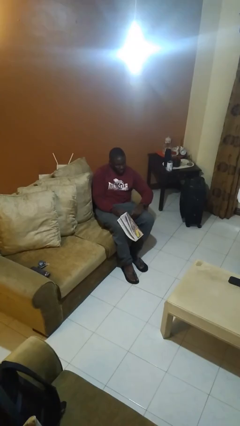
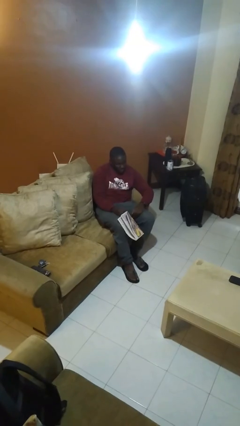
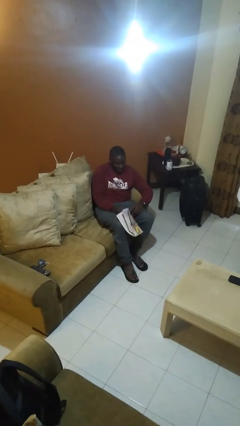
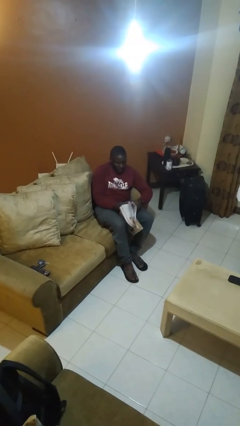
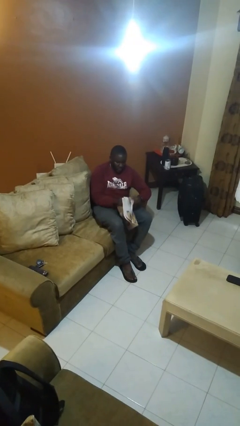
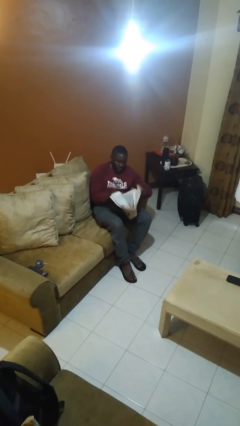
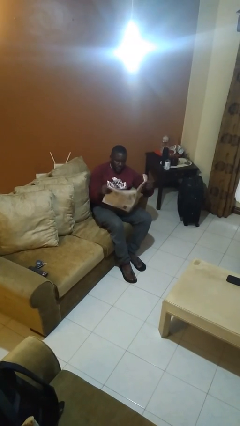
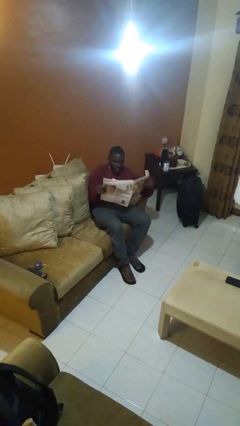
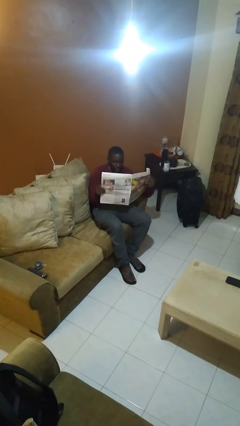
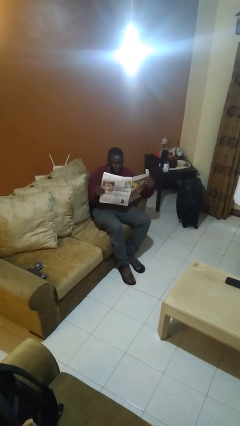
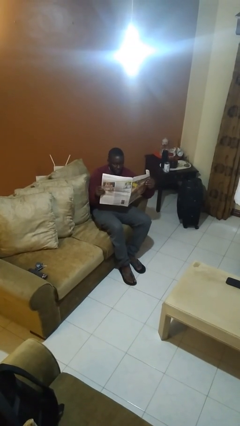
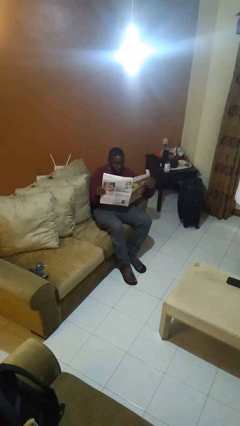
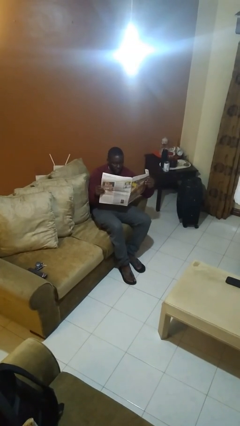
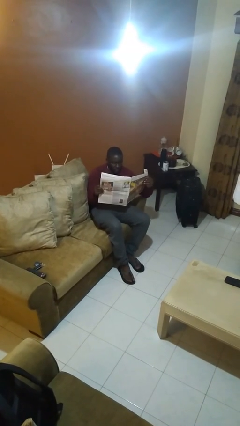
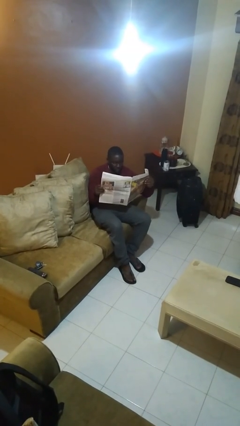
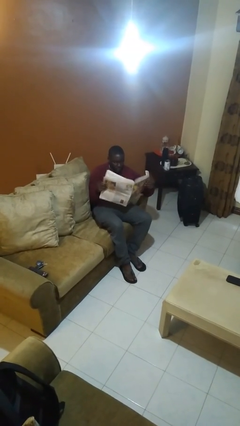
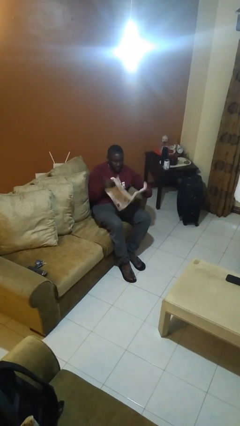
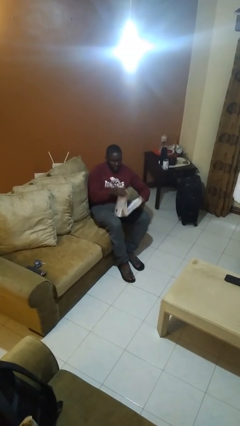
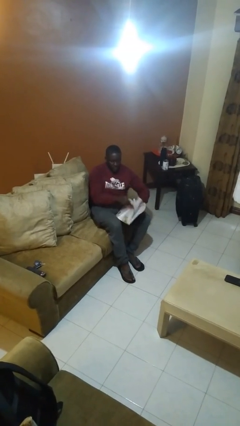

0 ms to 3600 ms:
person reads newspaper

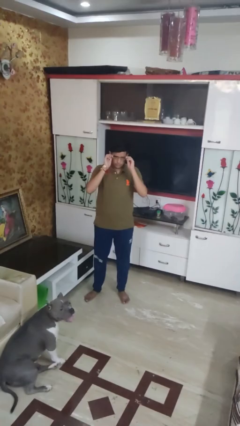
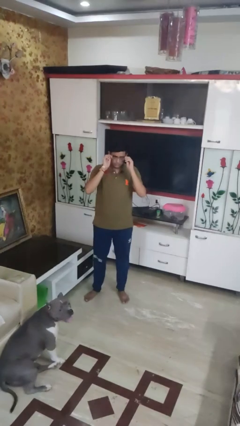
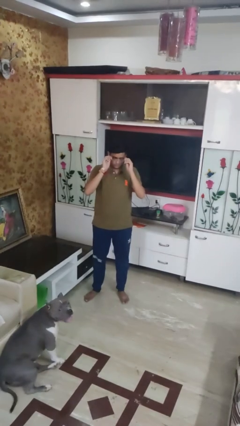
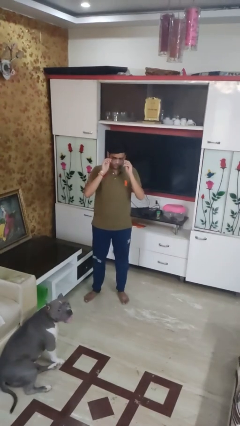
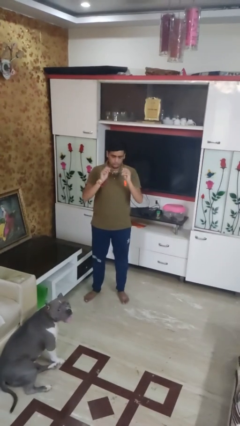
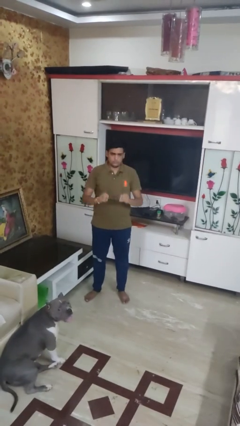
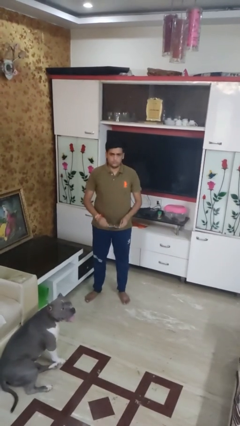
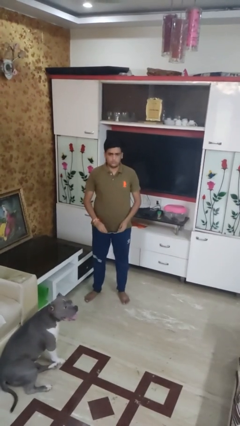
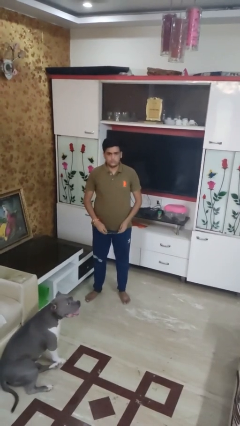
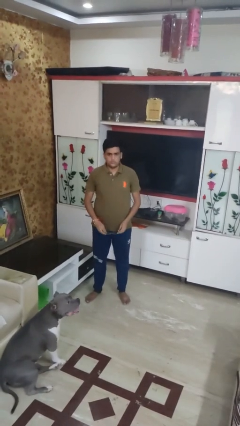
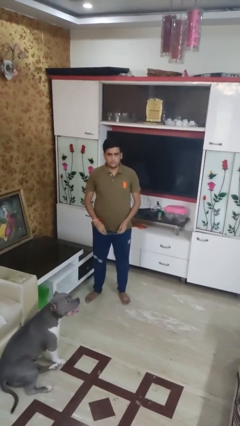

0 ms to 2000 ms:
person takes off glasses

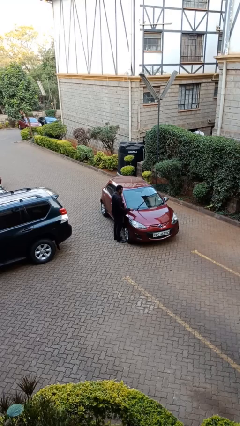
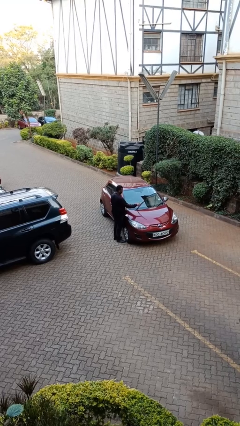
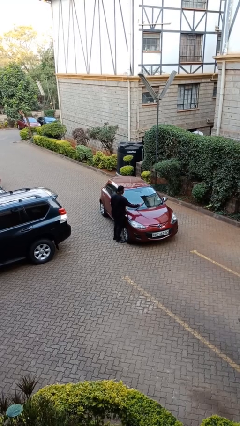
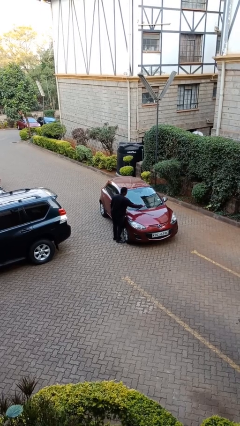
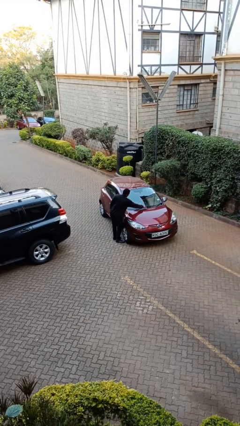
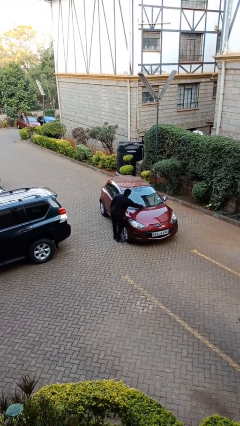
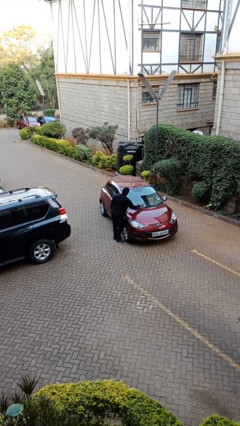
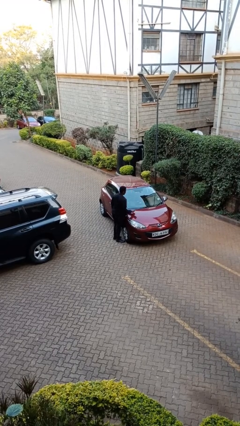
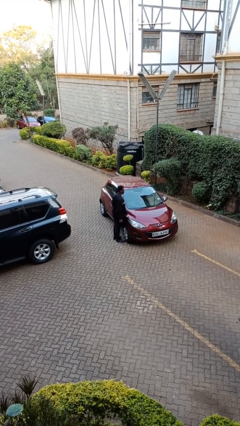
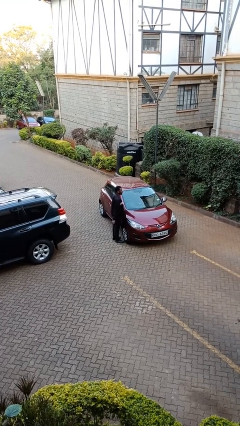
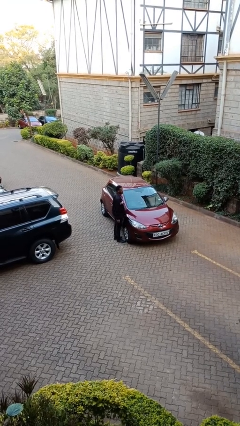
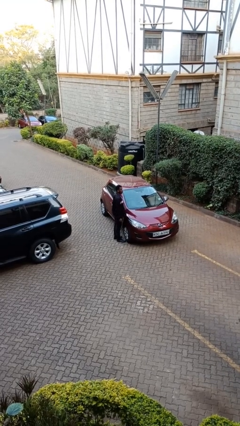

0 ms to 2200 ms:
person flips down car wipers

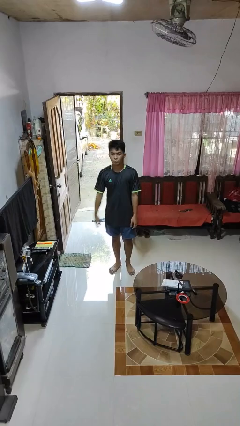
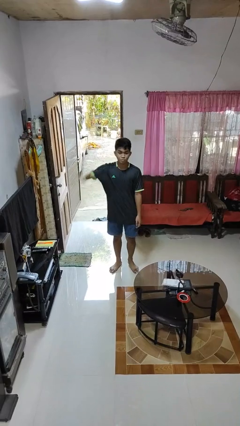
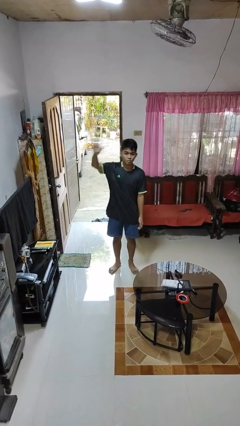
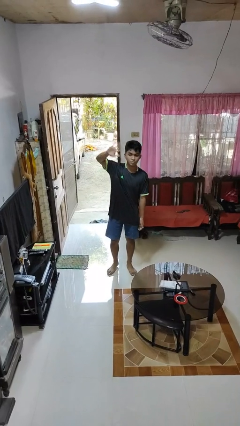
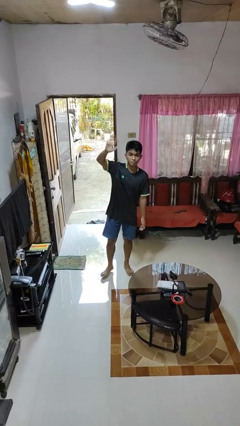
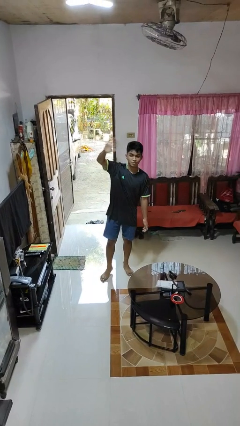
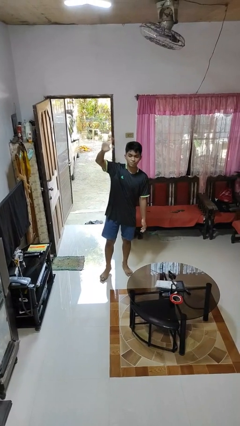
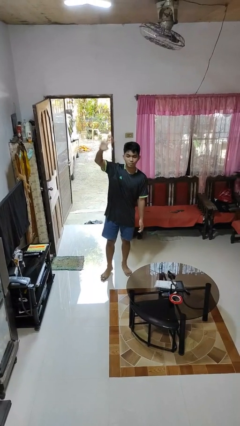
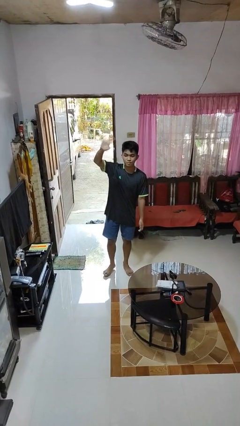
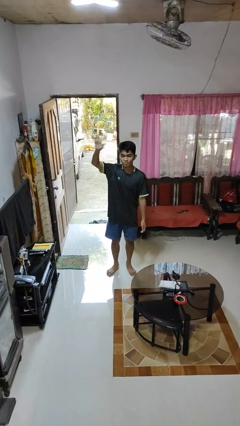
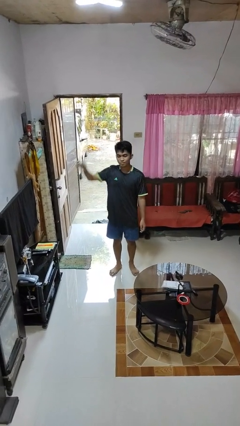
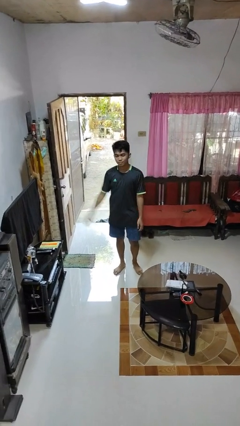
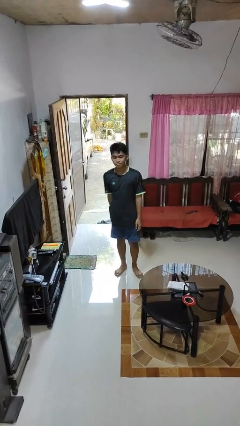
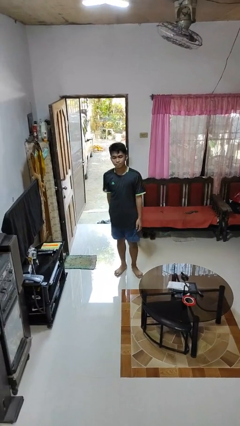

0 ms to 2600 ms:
person waves at person

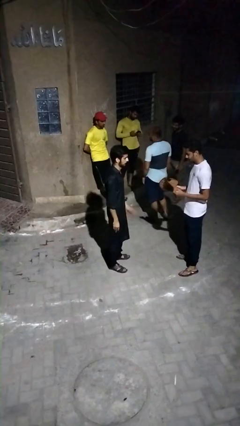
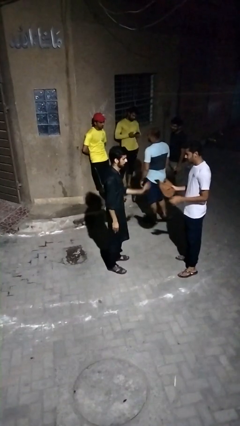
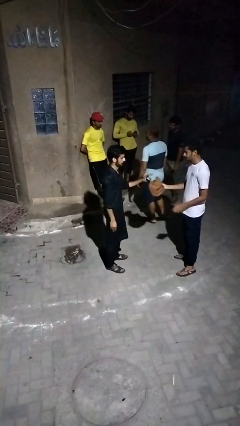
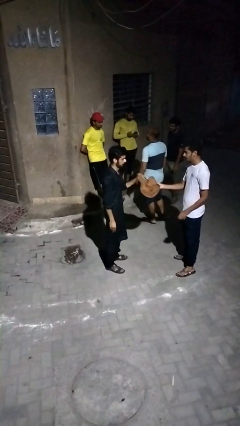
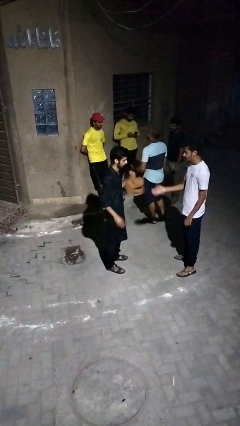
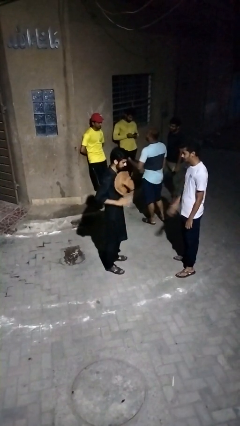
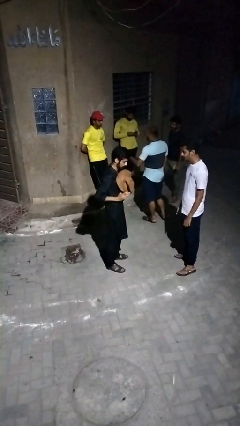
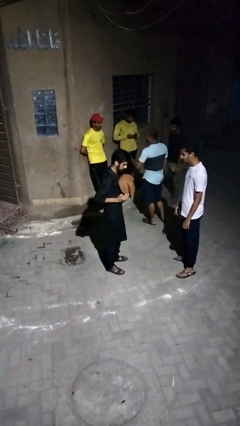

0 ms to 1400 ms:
person transfers object to person

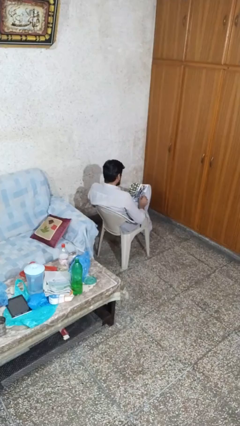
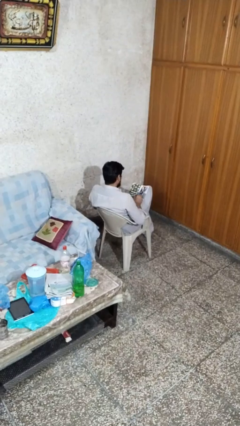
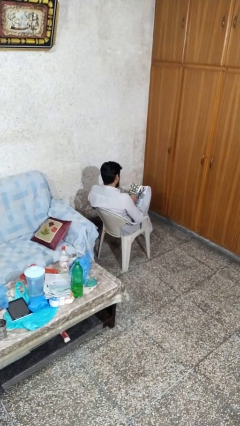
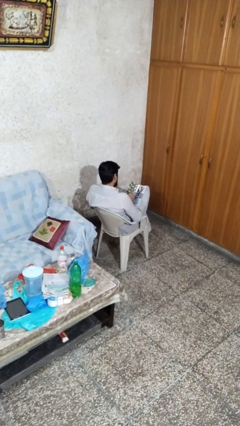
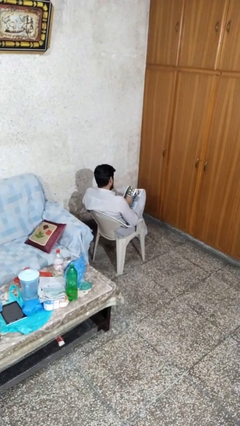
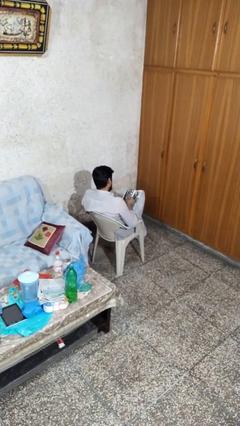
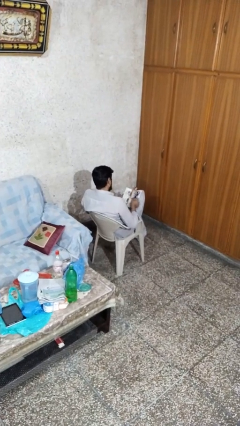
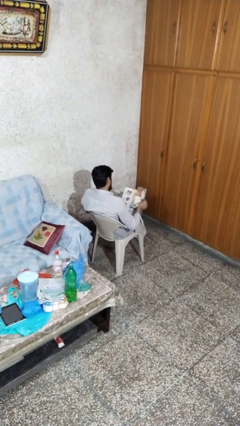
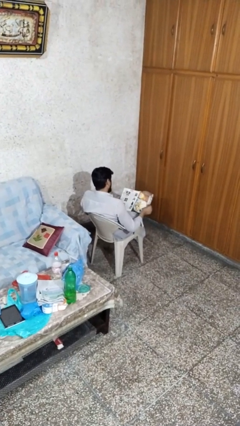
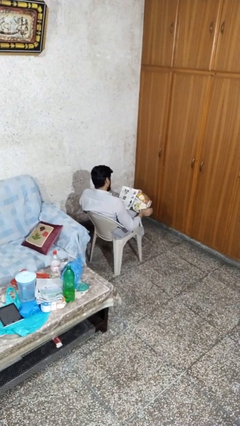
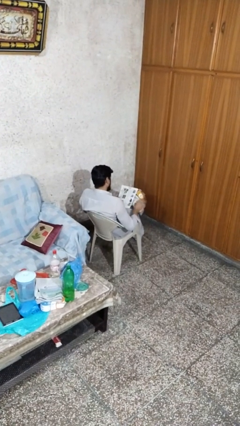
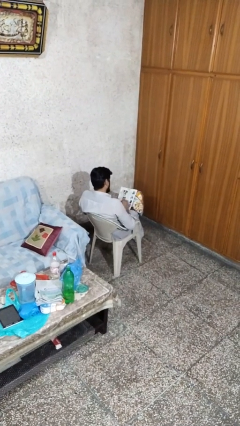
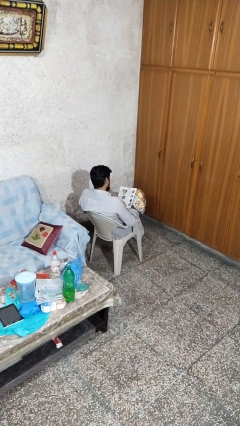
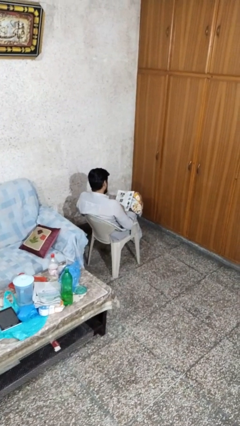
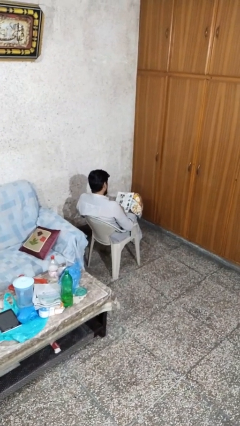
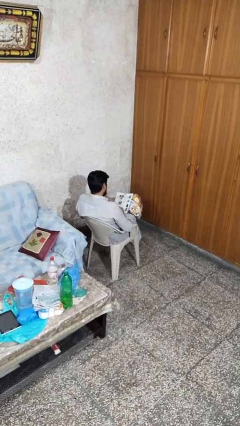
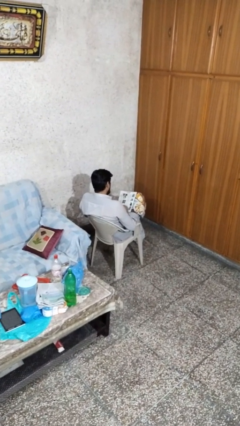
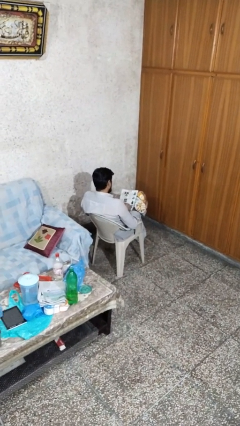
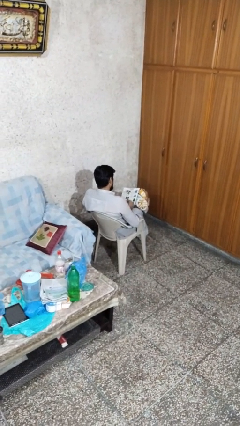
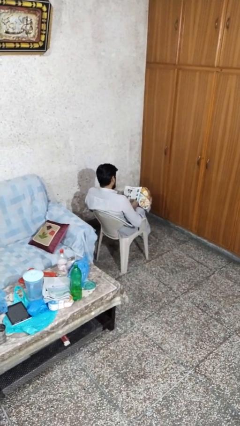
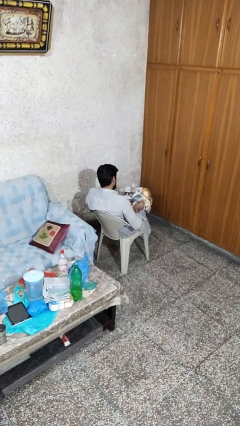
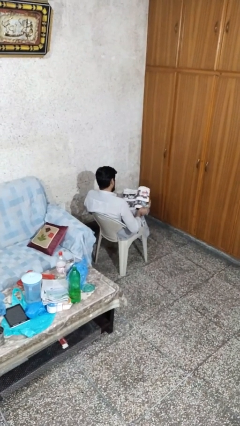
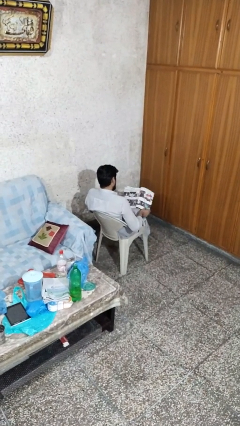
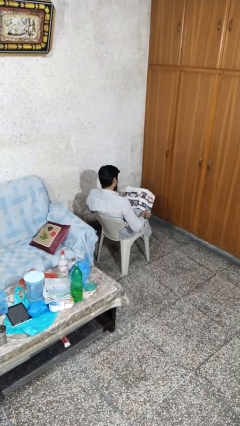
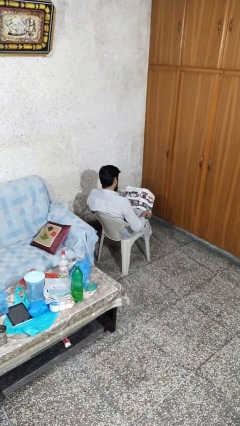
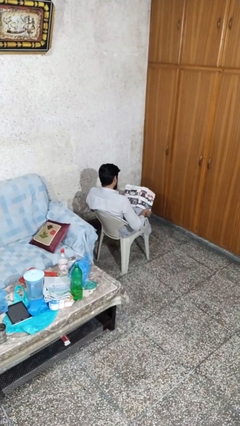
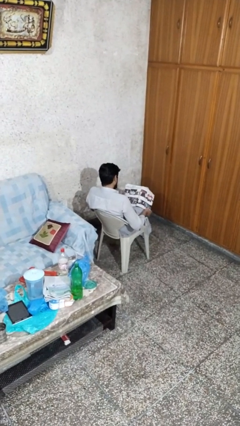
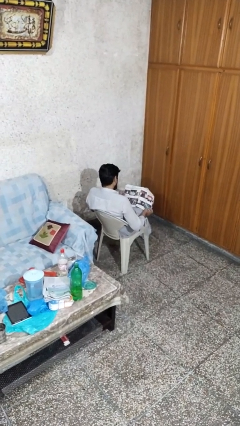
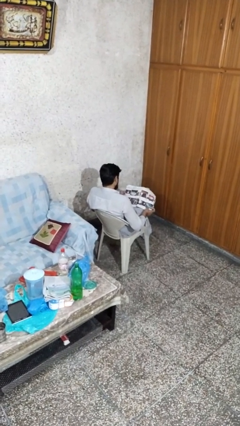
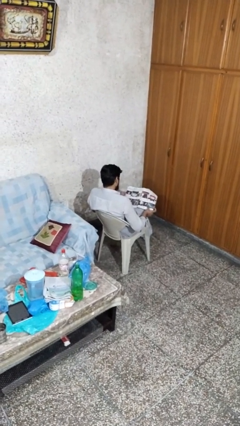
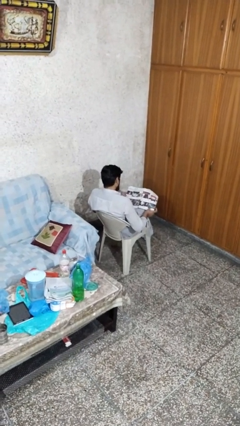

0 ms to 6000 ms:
person reads magazine
